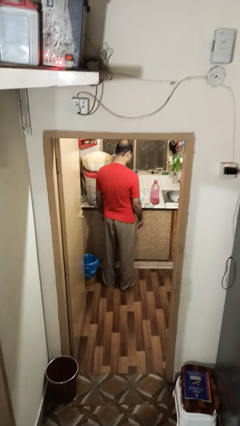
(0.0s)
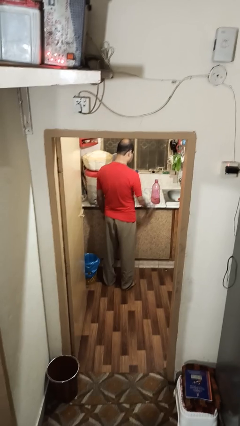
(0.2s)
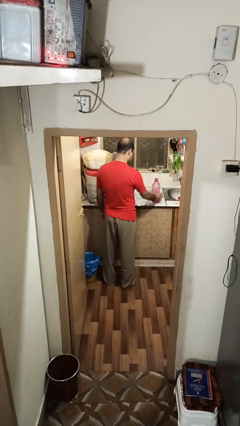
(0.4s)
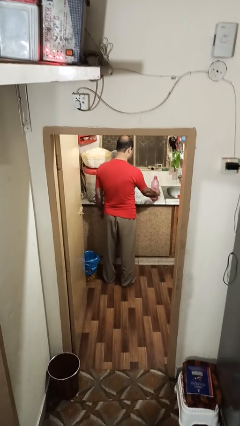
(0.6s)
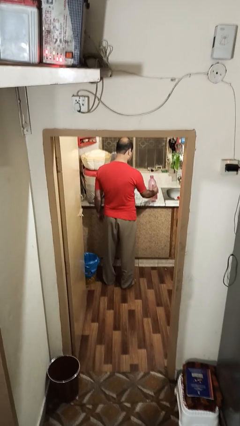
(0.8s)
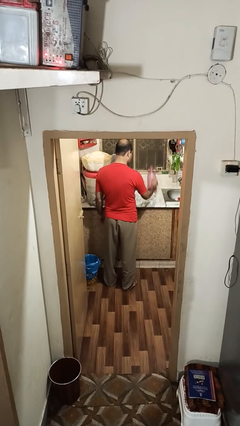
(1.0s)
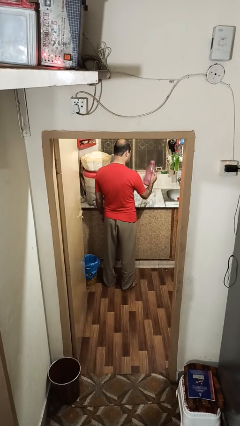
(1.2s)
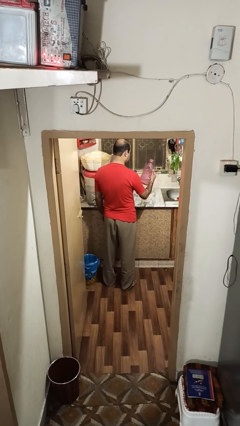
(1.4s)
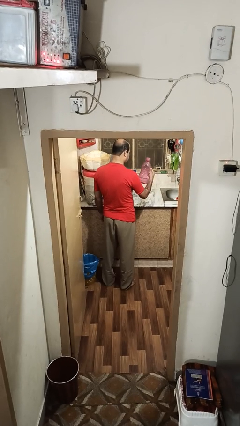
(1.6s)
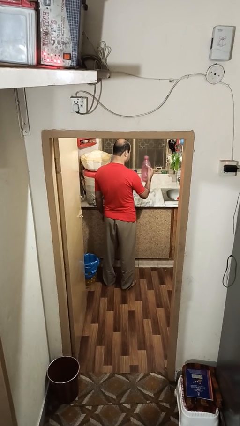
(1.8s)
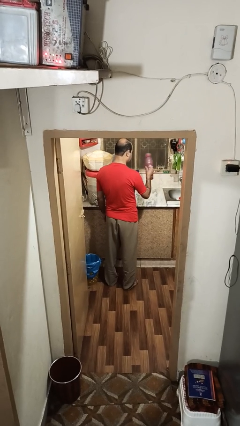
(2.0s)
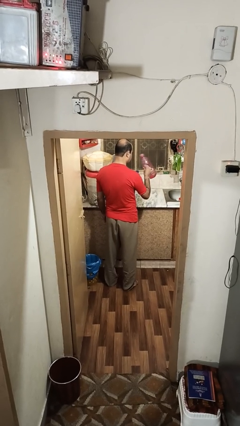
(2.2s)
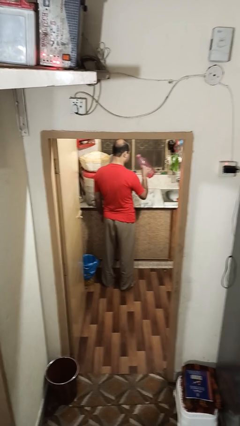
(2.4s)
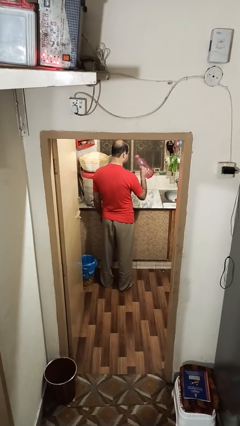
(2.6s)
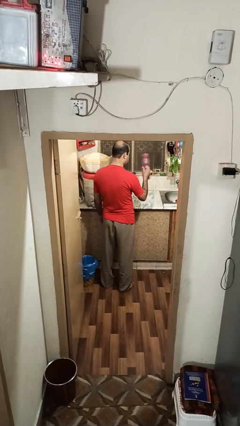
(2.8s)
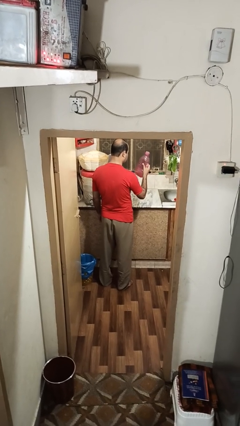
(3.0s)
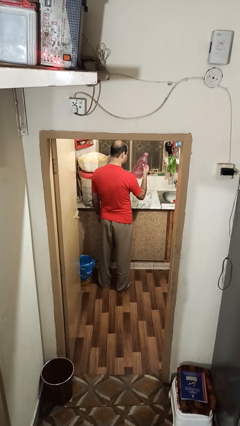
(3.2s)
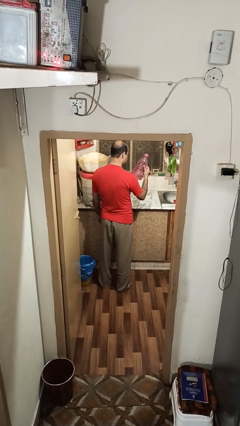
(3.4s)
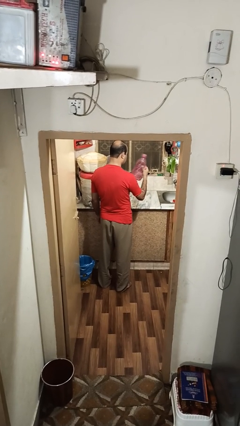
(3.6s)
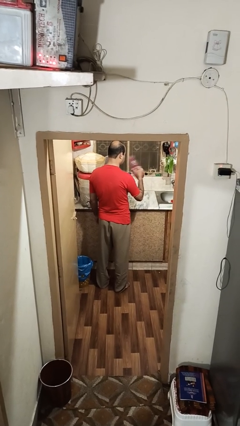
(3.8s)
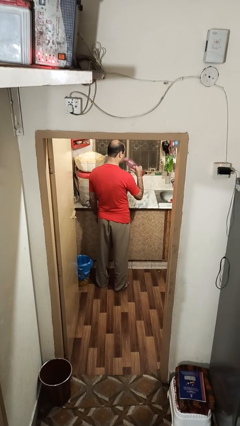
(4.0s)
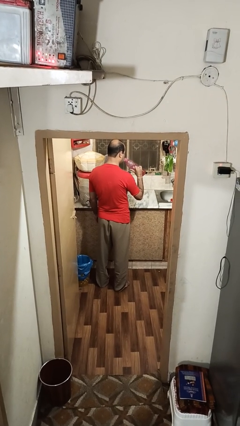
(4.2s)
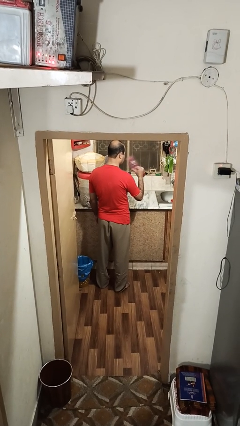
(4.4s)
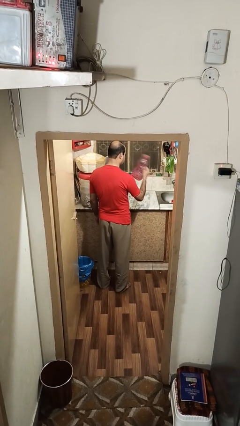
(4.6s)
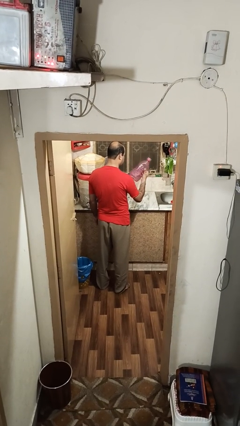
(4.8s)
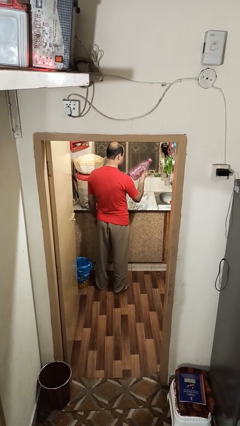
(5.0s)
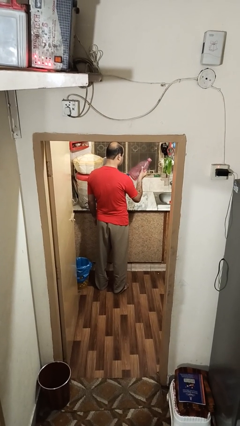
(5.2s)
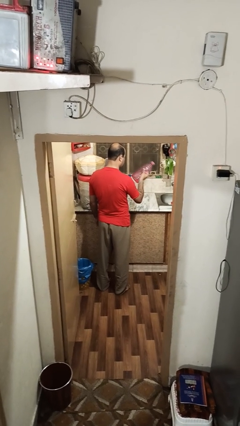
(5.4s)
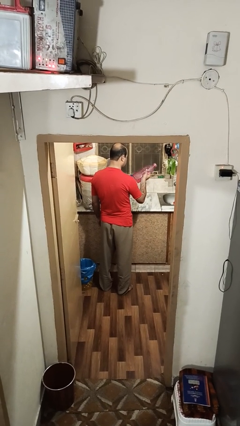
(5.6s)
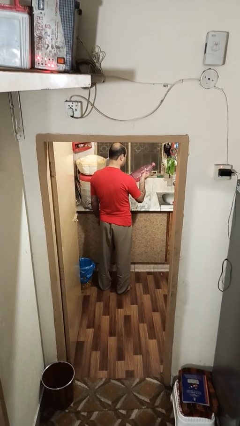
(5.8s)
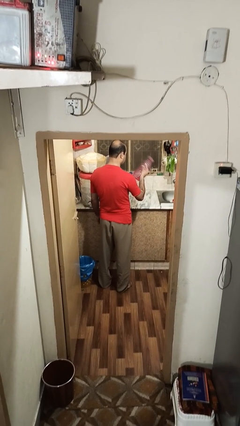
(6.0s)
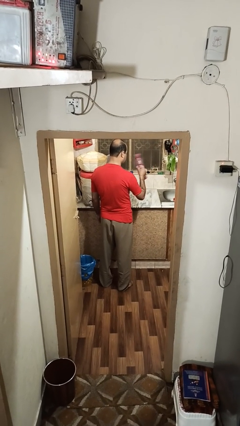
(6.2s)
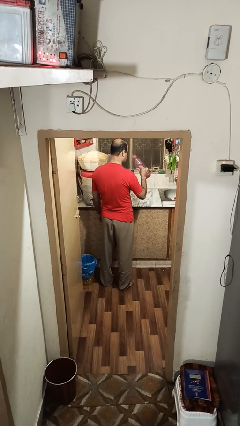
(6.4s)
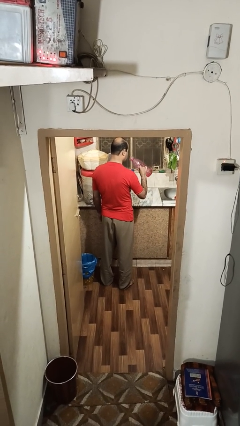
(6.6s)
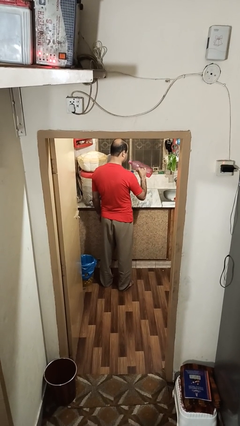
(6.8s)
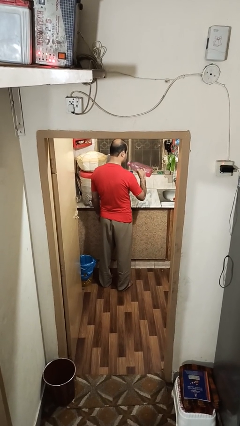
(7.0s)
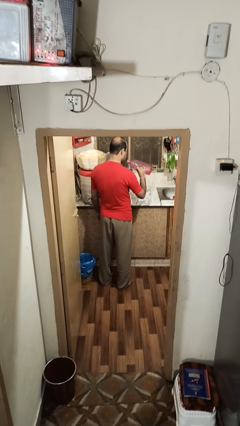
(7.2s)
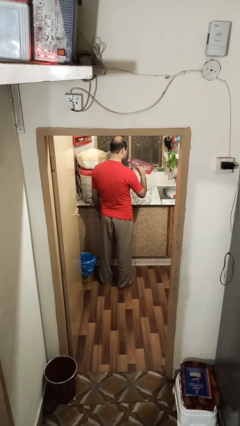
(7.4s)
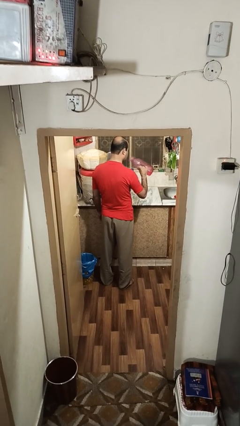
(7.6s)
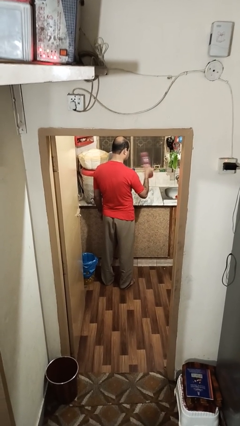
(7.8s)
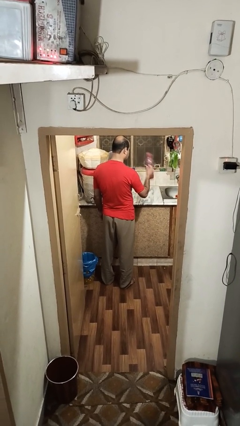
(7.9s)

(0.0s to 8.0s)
person picks up object from countertop

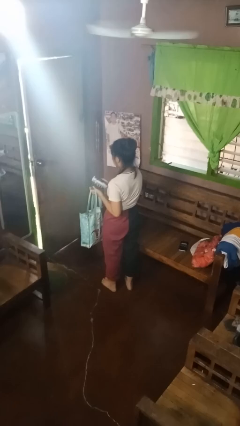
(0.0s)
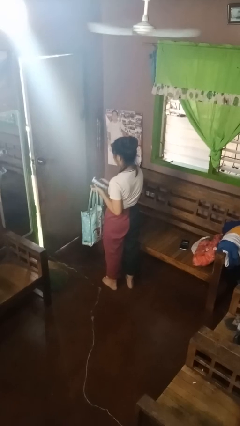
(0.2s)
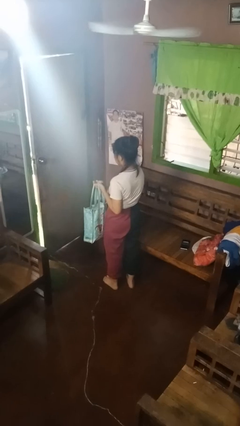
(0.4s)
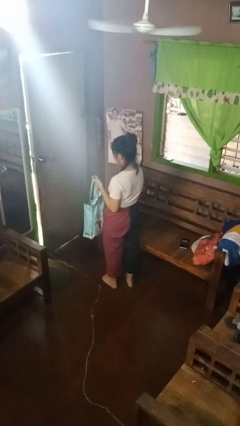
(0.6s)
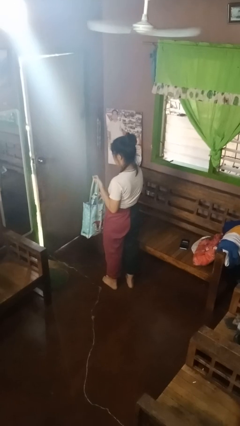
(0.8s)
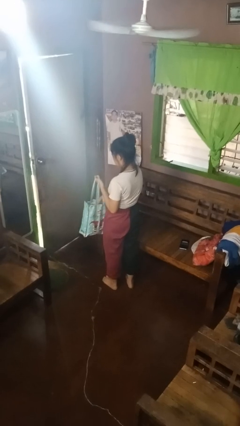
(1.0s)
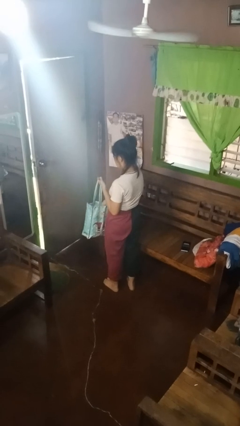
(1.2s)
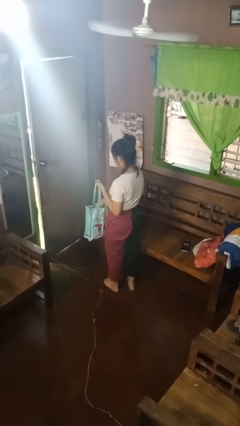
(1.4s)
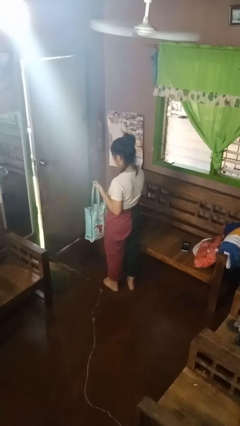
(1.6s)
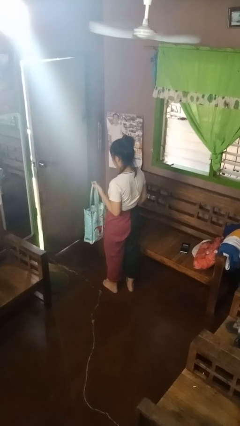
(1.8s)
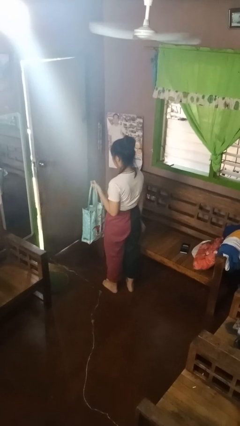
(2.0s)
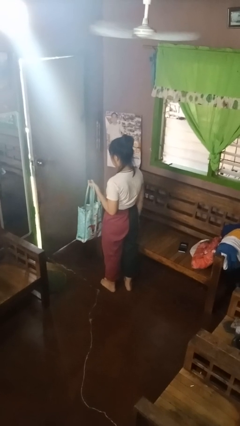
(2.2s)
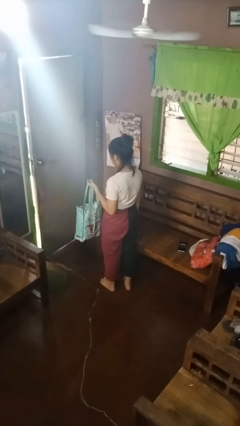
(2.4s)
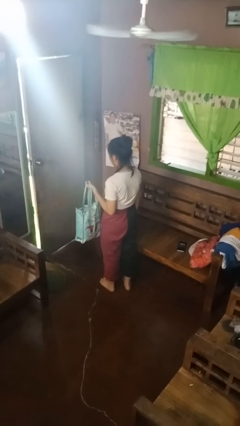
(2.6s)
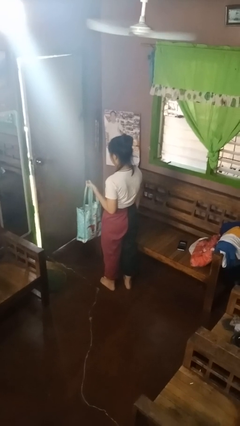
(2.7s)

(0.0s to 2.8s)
person puts object into bag

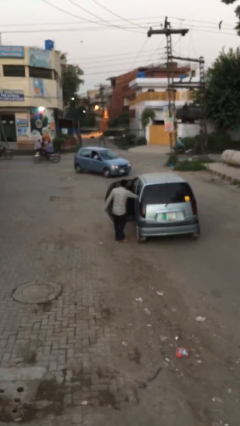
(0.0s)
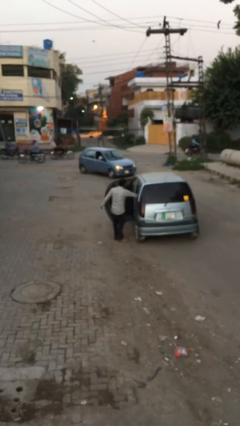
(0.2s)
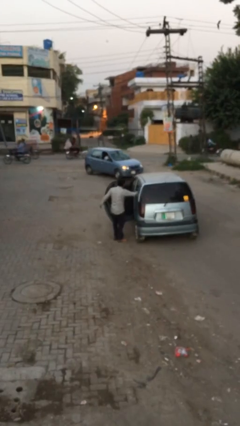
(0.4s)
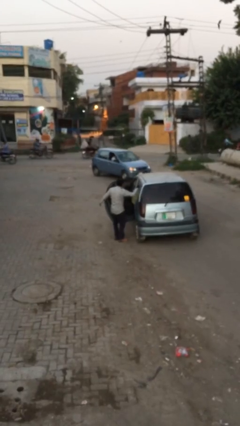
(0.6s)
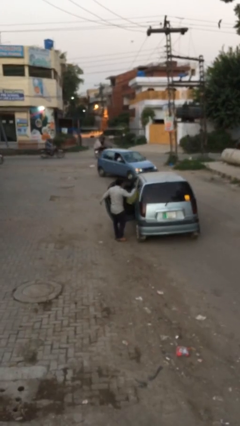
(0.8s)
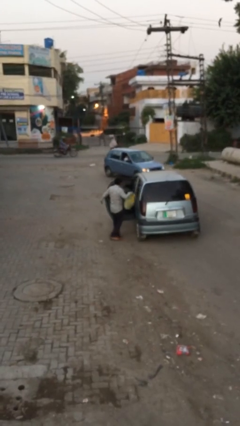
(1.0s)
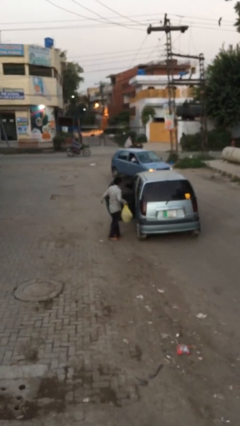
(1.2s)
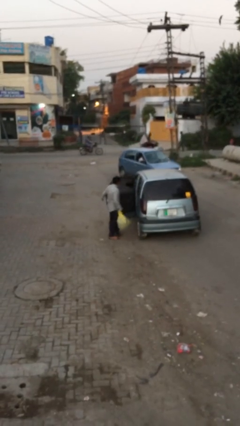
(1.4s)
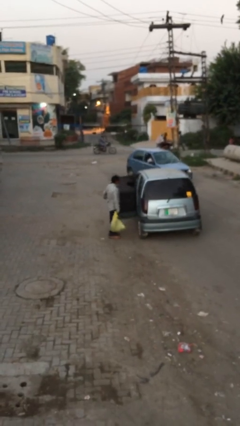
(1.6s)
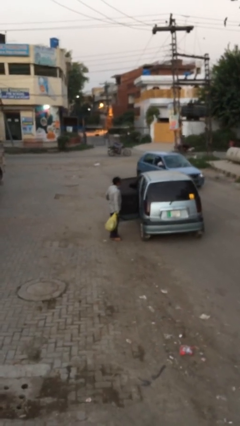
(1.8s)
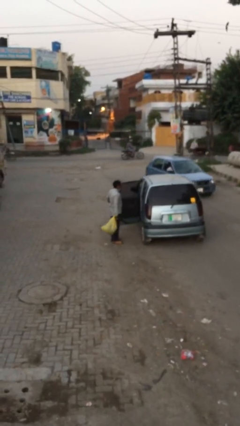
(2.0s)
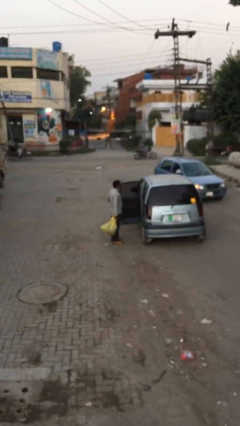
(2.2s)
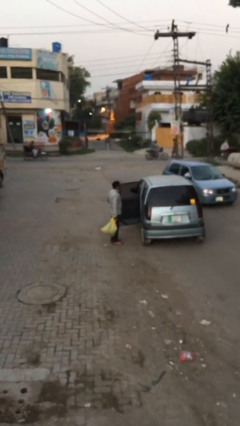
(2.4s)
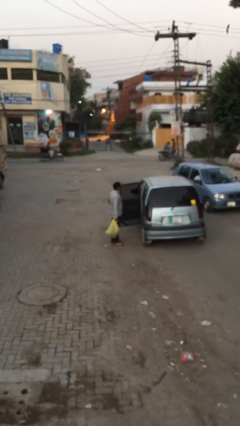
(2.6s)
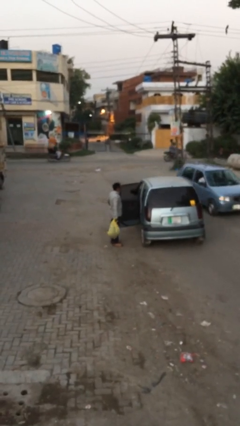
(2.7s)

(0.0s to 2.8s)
person unloads car

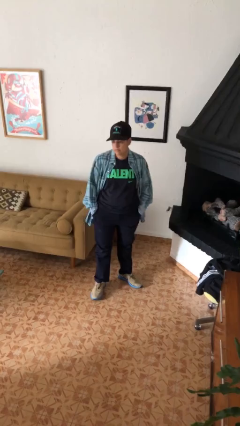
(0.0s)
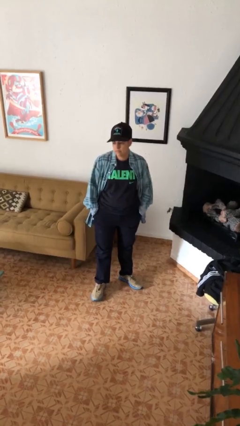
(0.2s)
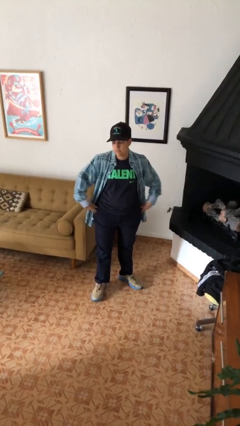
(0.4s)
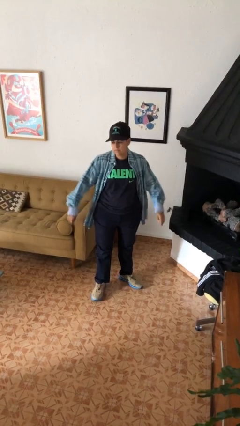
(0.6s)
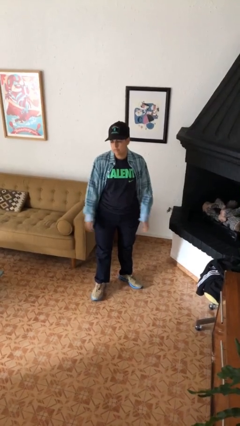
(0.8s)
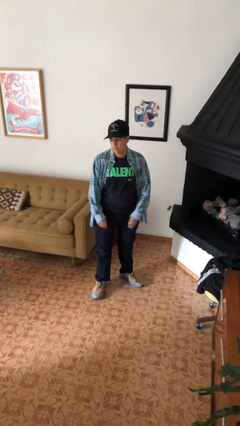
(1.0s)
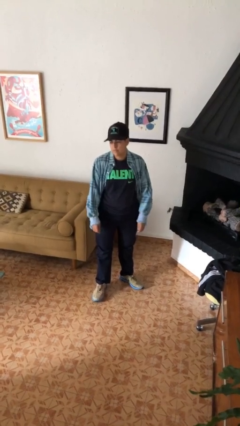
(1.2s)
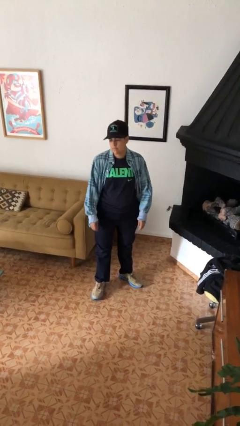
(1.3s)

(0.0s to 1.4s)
person puts hands in back pockets

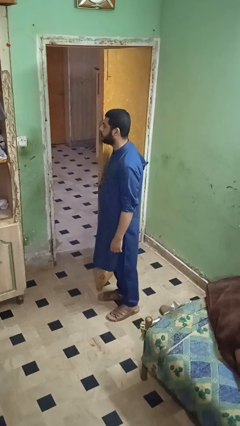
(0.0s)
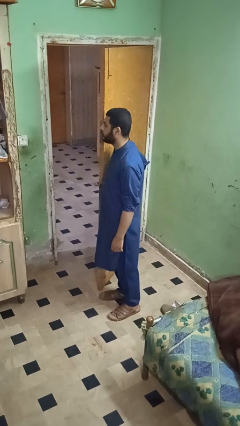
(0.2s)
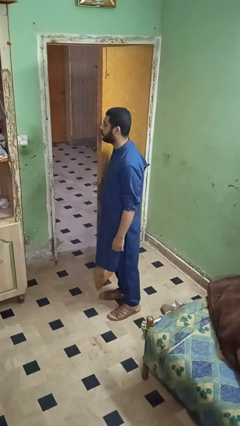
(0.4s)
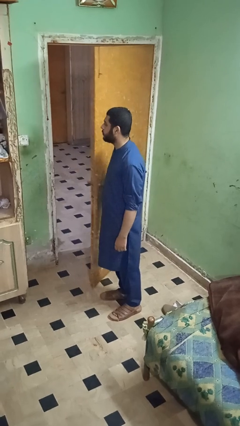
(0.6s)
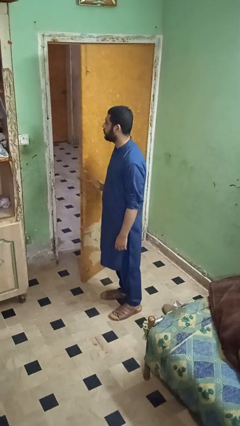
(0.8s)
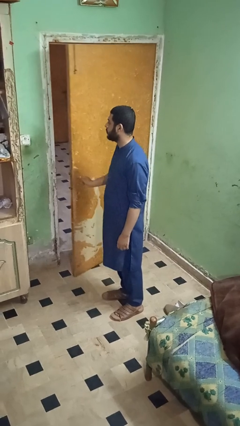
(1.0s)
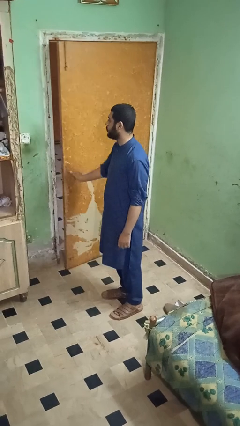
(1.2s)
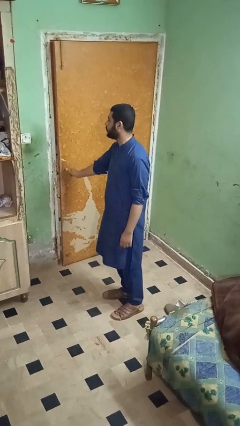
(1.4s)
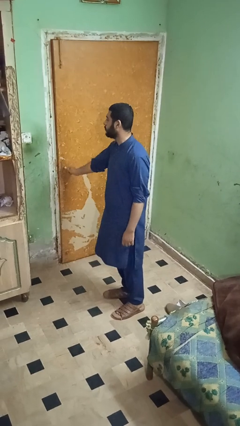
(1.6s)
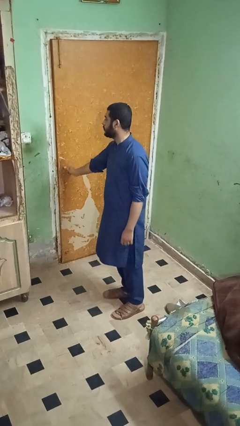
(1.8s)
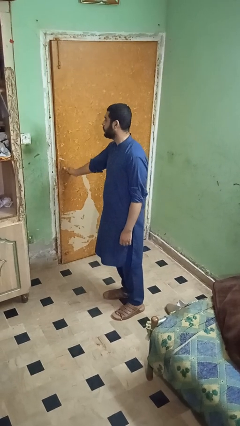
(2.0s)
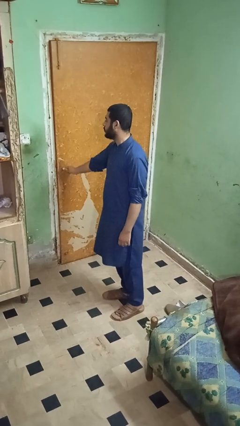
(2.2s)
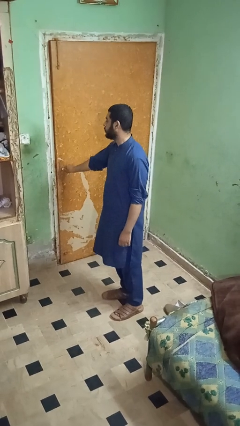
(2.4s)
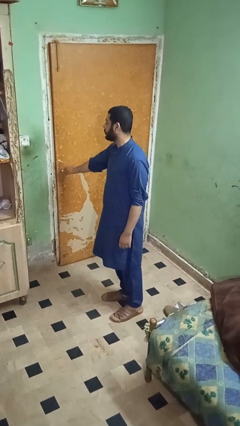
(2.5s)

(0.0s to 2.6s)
person closes facility door

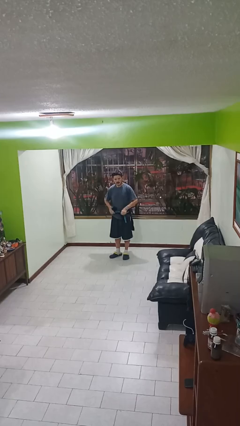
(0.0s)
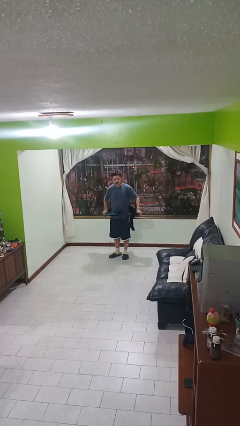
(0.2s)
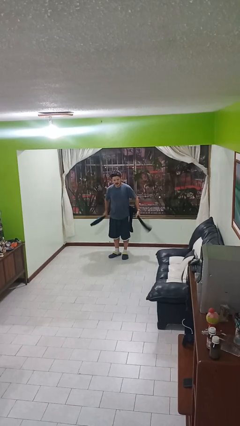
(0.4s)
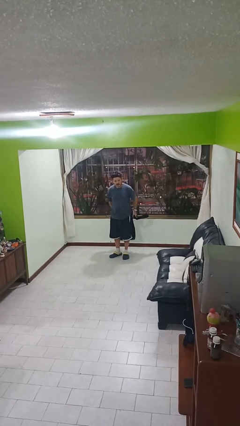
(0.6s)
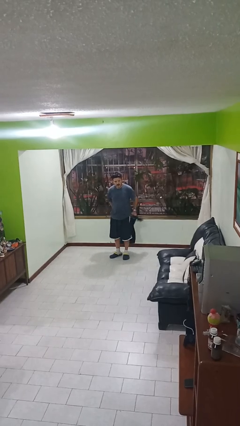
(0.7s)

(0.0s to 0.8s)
person unties jacket around waist
